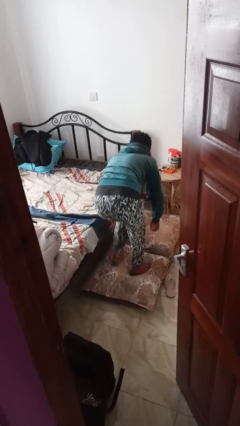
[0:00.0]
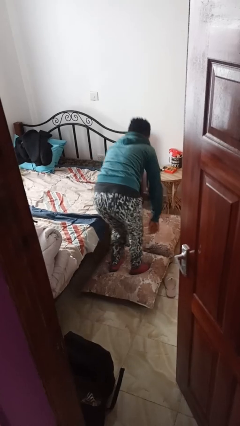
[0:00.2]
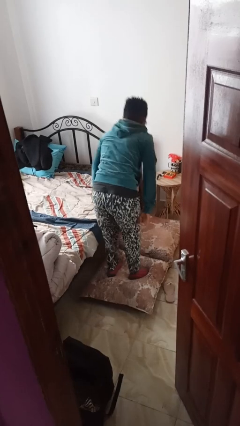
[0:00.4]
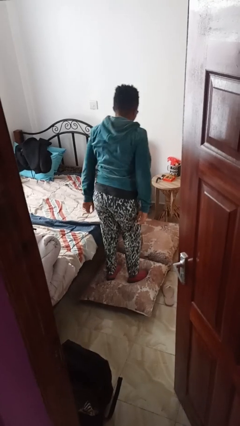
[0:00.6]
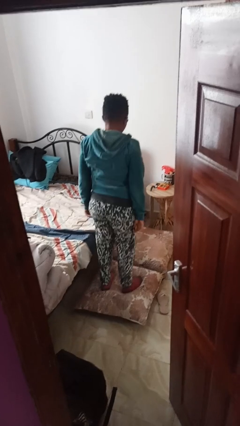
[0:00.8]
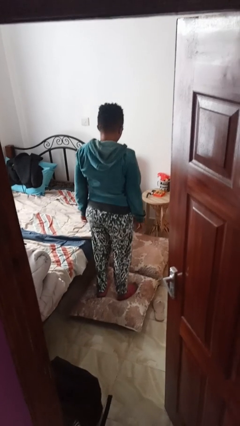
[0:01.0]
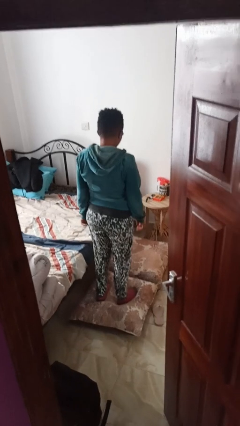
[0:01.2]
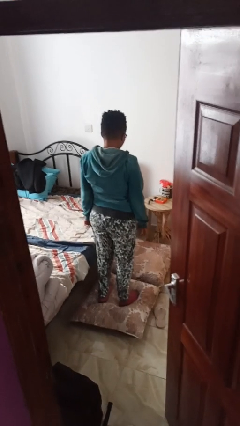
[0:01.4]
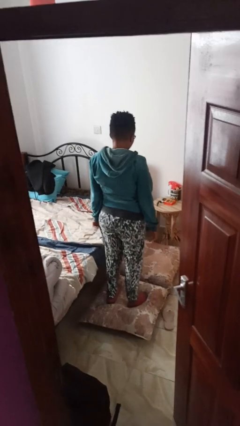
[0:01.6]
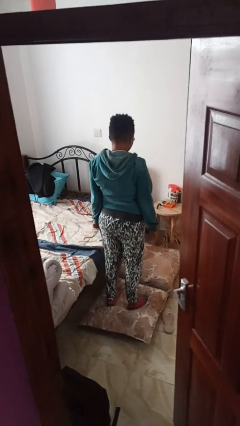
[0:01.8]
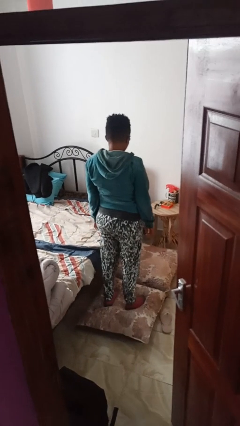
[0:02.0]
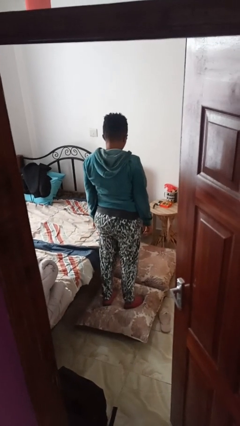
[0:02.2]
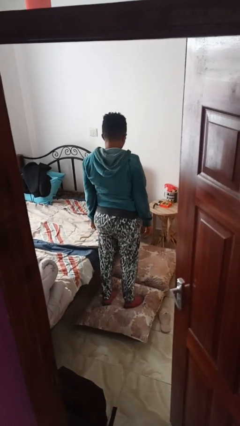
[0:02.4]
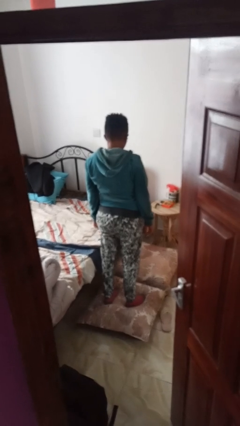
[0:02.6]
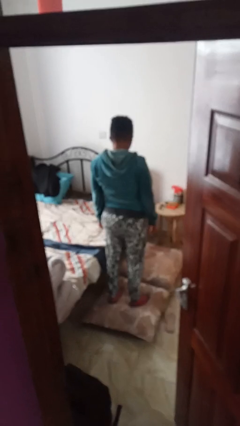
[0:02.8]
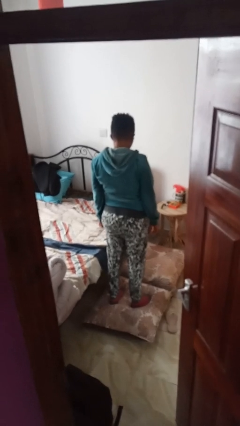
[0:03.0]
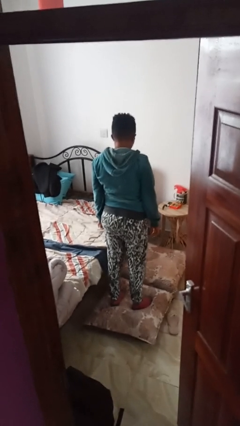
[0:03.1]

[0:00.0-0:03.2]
person stands up from floor

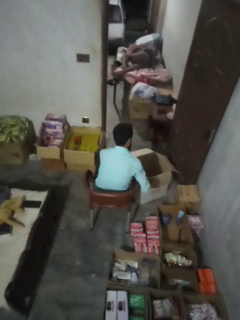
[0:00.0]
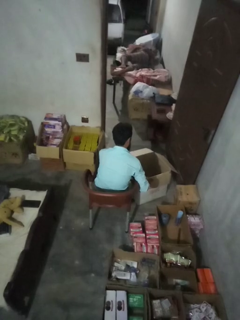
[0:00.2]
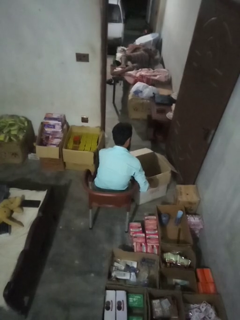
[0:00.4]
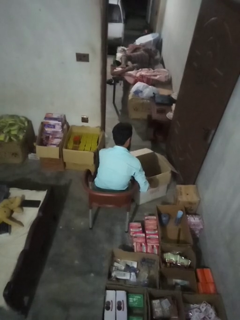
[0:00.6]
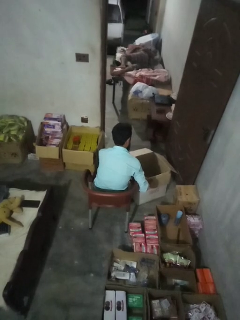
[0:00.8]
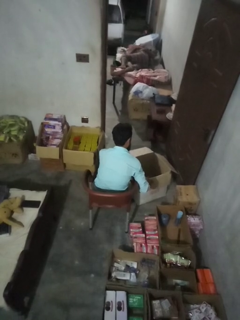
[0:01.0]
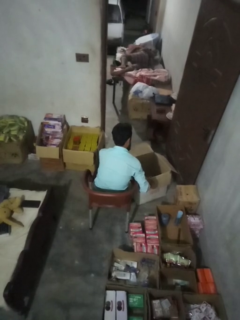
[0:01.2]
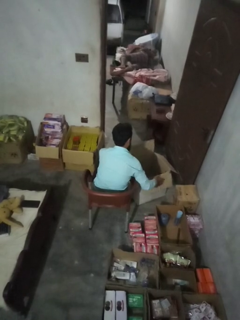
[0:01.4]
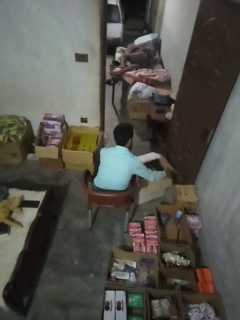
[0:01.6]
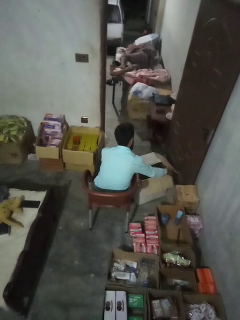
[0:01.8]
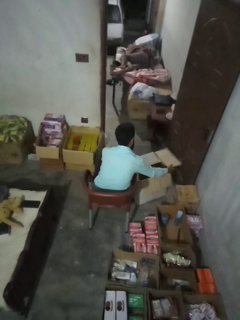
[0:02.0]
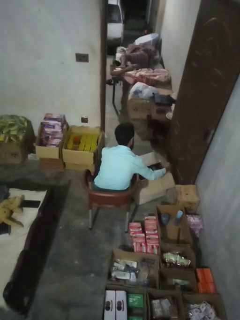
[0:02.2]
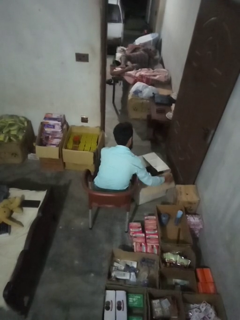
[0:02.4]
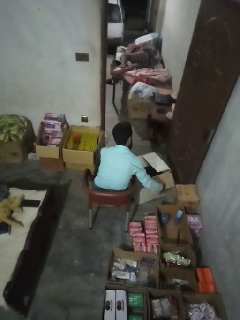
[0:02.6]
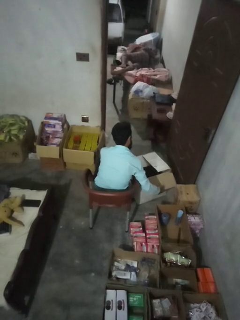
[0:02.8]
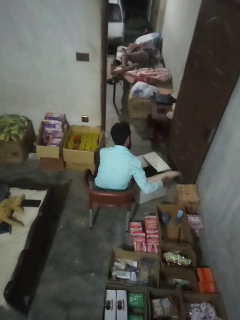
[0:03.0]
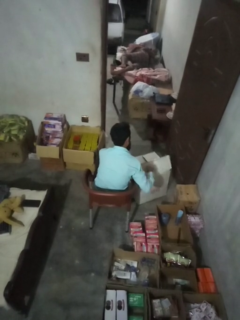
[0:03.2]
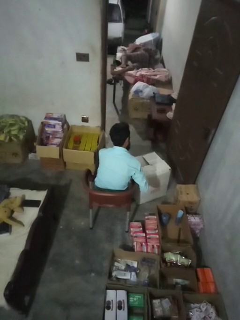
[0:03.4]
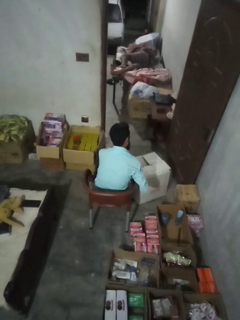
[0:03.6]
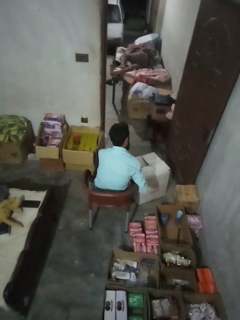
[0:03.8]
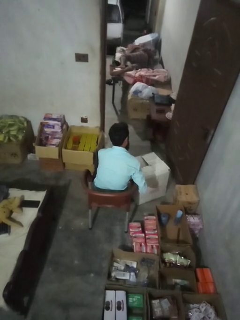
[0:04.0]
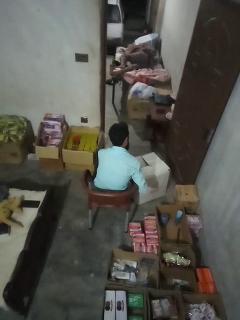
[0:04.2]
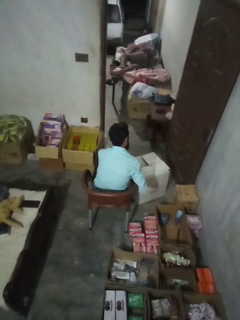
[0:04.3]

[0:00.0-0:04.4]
person closes box

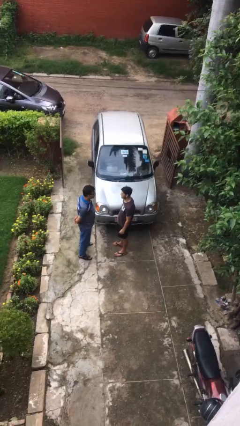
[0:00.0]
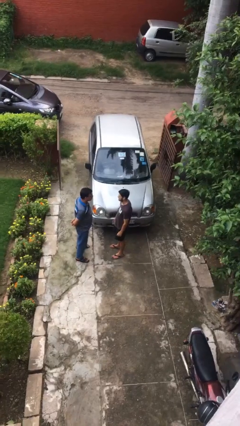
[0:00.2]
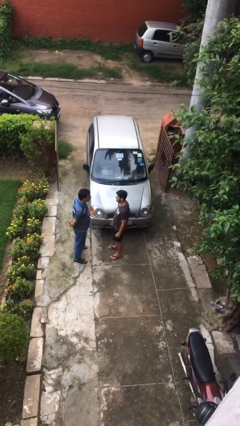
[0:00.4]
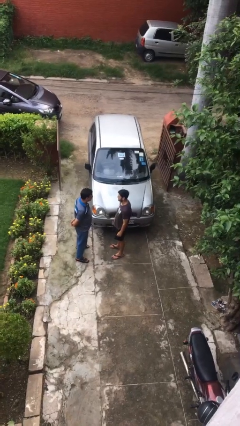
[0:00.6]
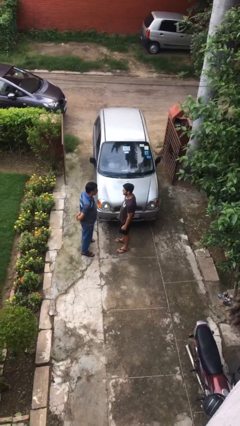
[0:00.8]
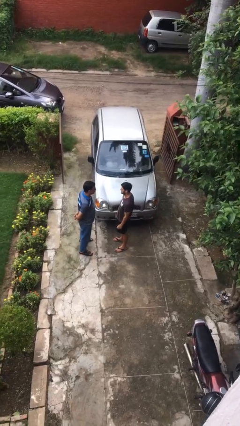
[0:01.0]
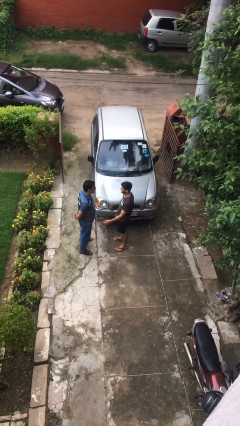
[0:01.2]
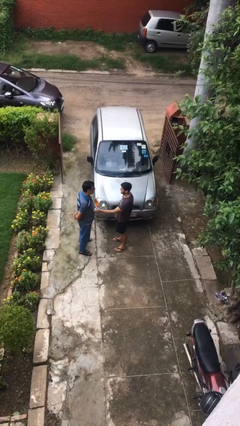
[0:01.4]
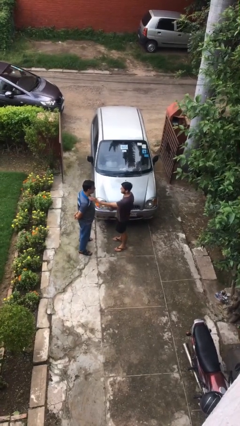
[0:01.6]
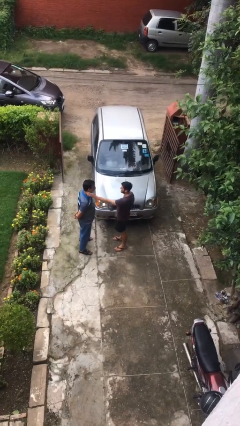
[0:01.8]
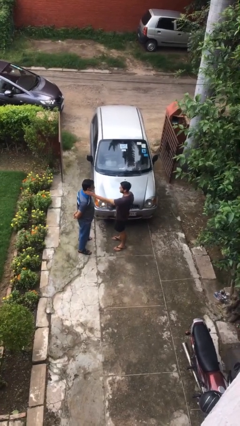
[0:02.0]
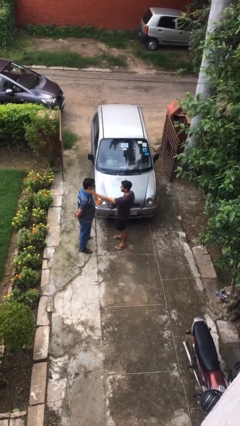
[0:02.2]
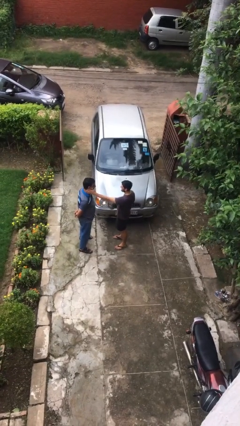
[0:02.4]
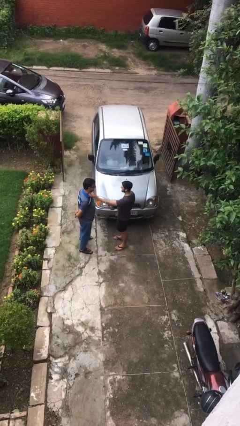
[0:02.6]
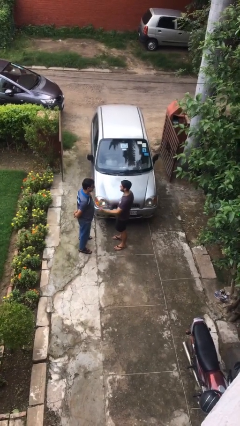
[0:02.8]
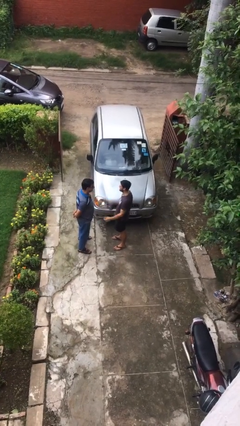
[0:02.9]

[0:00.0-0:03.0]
person touches face of person

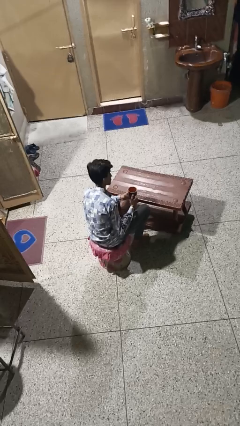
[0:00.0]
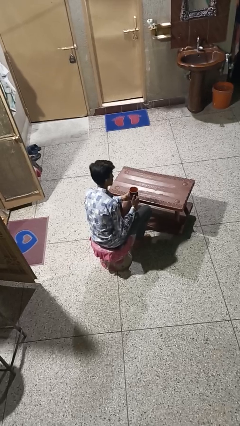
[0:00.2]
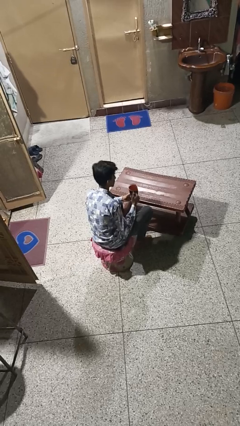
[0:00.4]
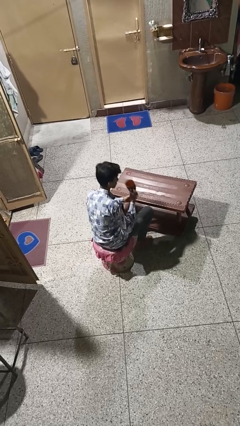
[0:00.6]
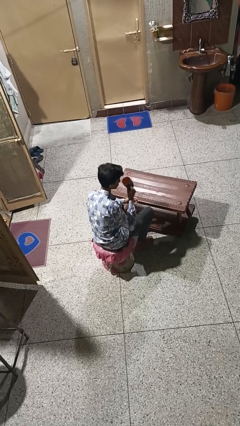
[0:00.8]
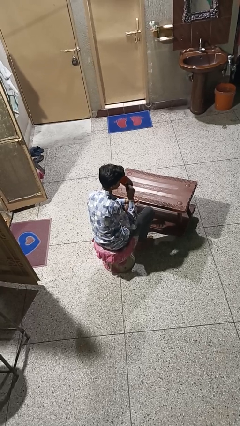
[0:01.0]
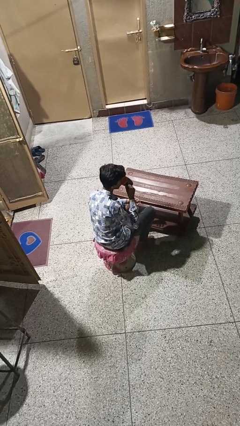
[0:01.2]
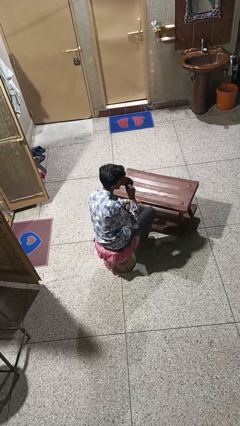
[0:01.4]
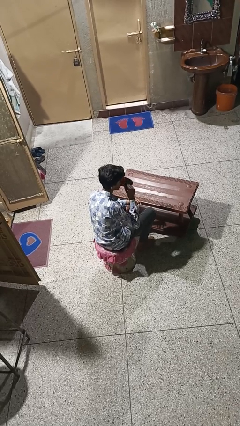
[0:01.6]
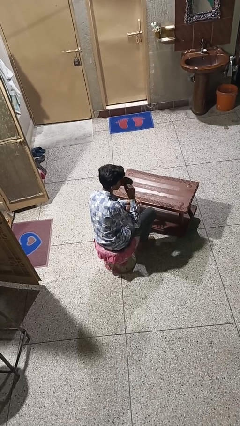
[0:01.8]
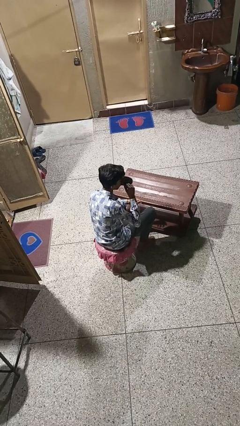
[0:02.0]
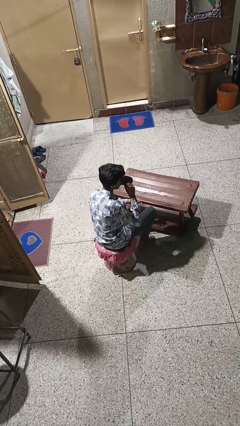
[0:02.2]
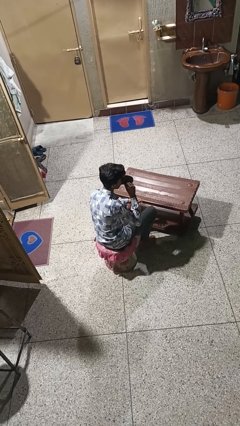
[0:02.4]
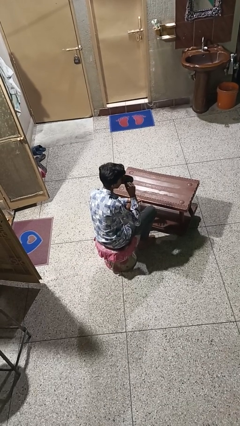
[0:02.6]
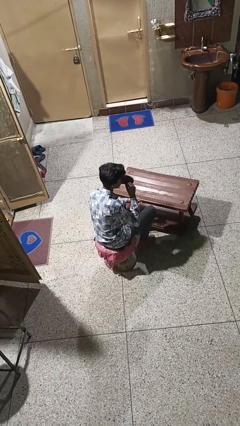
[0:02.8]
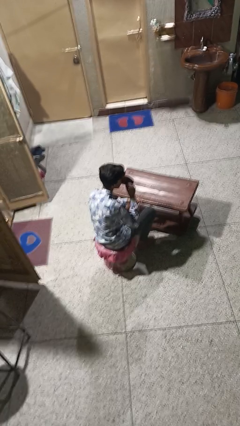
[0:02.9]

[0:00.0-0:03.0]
person drinks from mug

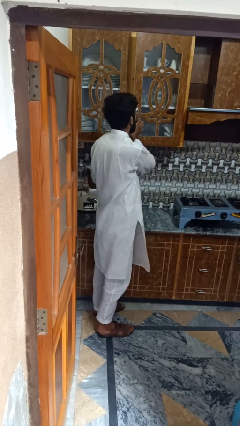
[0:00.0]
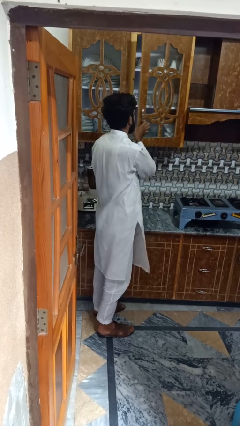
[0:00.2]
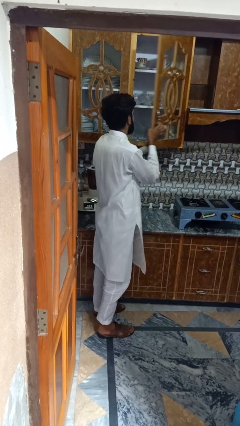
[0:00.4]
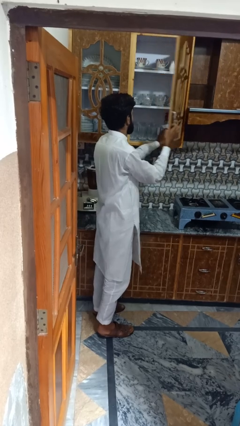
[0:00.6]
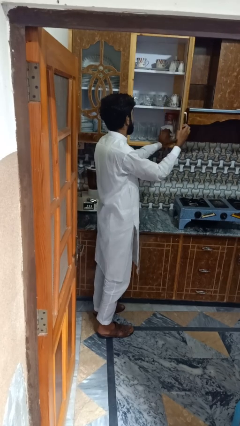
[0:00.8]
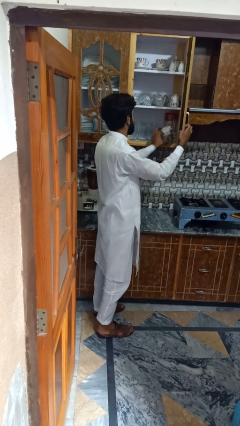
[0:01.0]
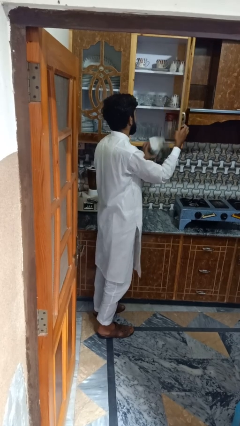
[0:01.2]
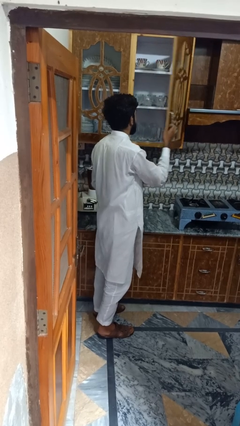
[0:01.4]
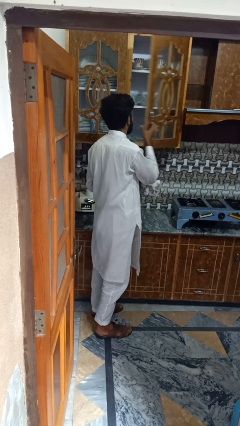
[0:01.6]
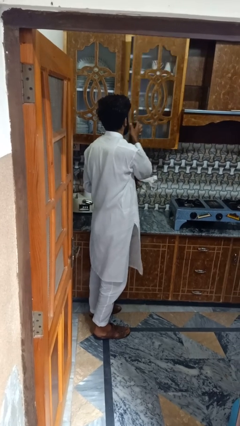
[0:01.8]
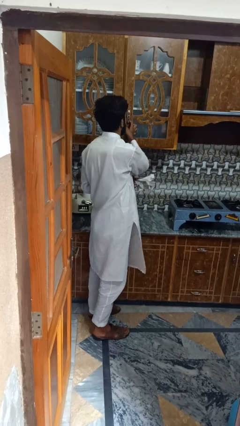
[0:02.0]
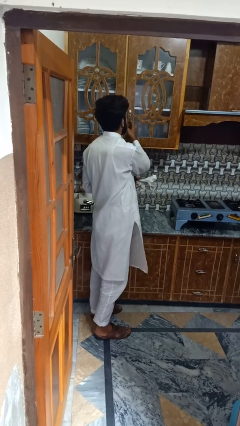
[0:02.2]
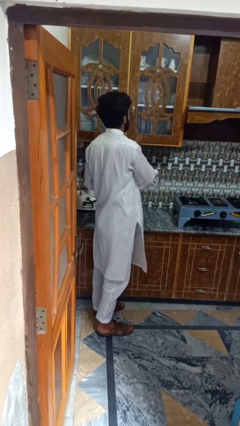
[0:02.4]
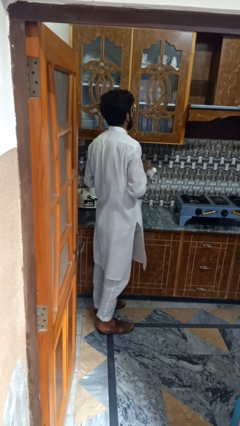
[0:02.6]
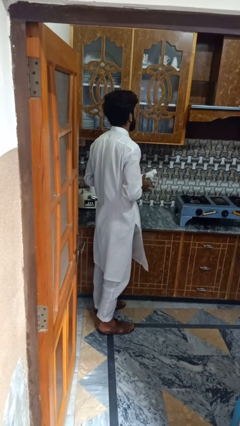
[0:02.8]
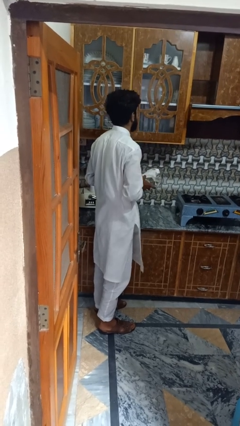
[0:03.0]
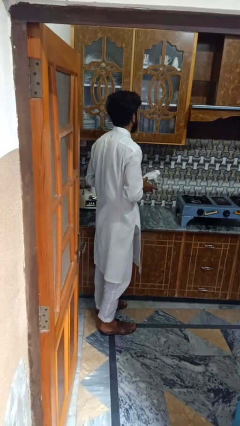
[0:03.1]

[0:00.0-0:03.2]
person puts object into kitchen drawer

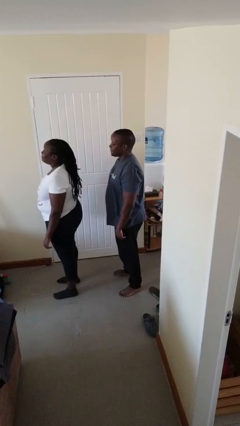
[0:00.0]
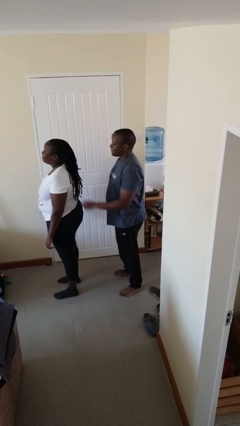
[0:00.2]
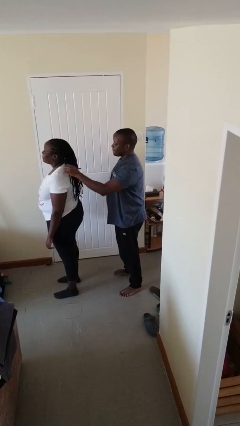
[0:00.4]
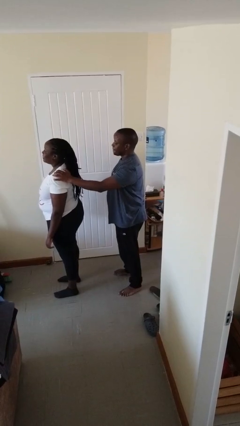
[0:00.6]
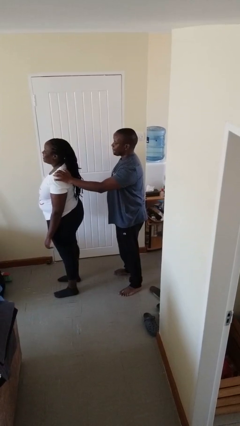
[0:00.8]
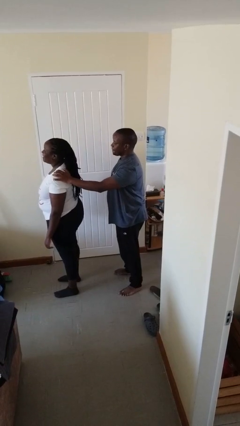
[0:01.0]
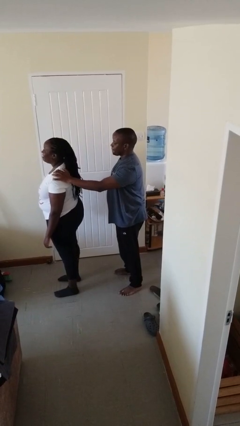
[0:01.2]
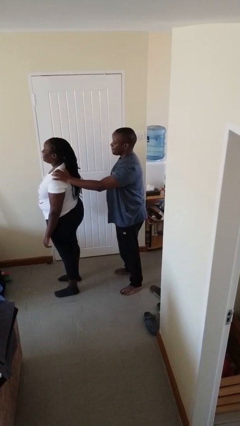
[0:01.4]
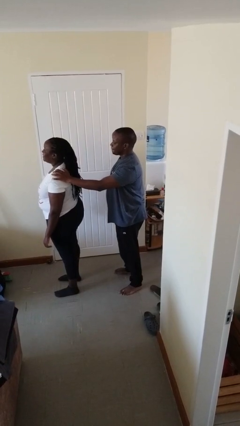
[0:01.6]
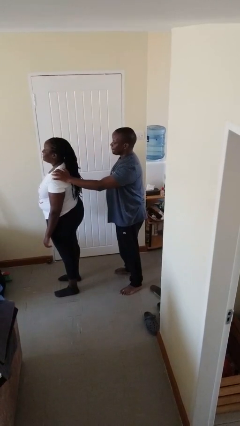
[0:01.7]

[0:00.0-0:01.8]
person grabs person by shoulder
